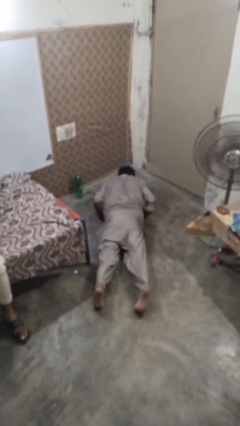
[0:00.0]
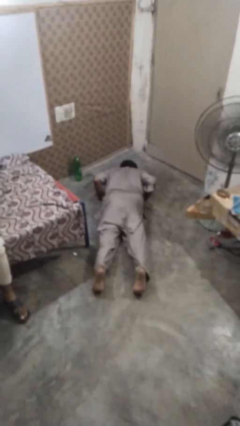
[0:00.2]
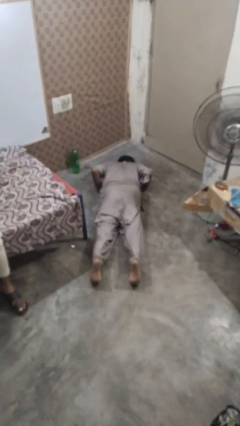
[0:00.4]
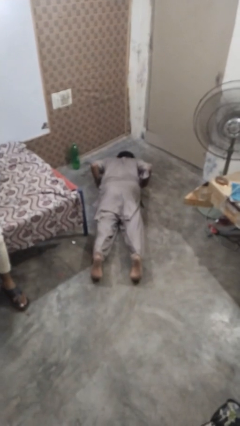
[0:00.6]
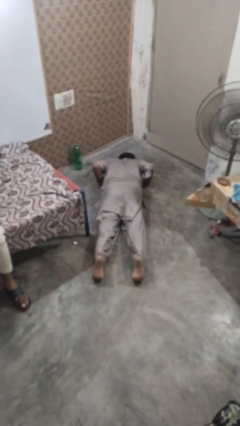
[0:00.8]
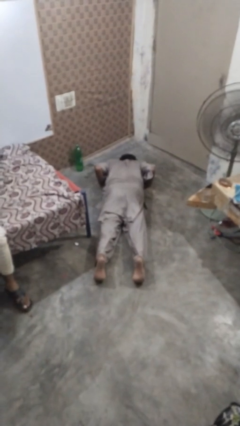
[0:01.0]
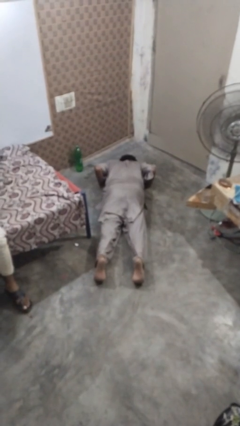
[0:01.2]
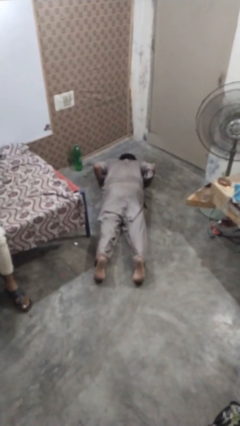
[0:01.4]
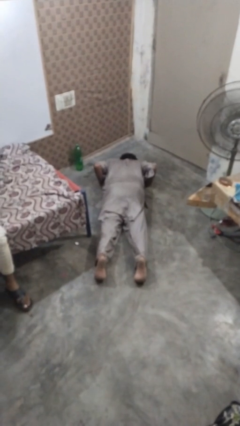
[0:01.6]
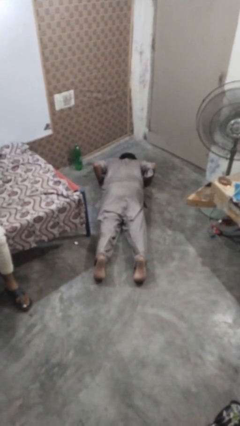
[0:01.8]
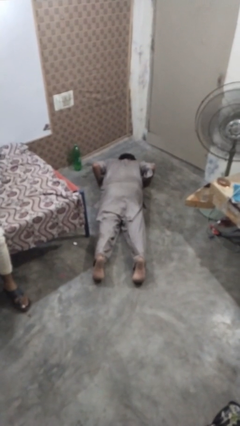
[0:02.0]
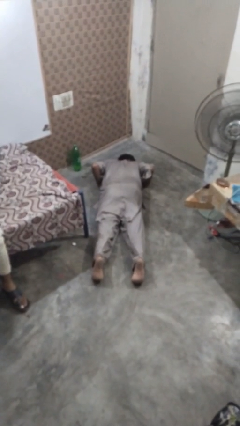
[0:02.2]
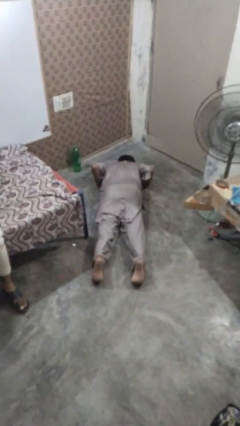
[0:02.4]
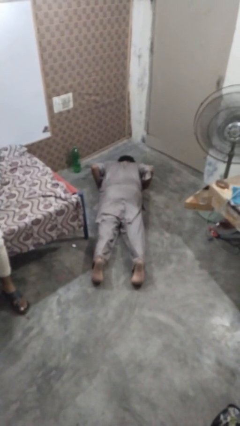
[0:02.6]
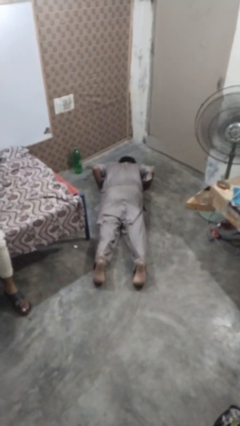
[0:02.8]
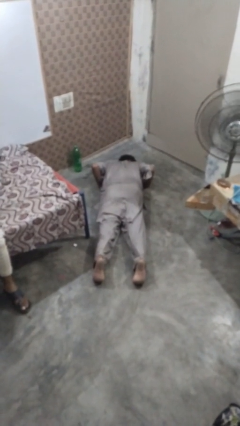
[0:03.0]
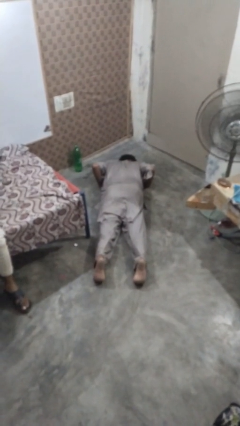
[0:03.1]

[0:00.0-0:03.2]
person lies down on floor

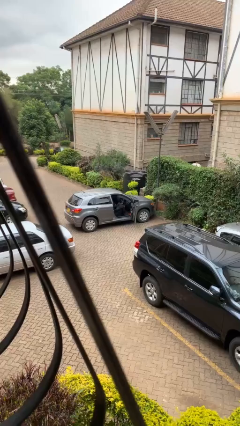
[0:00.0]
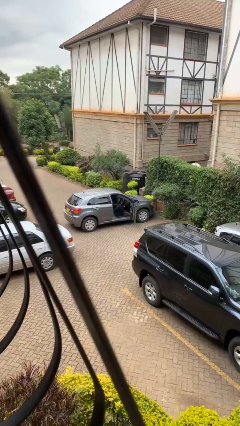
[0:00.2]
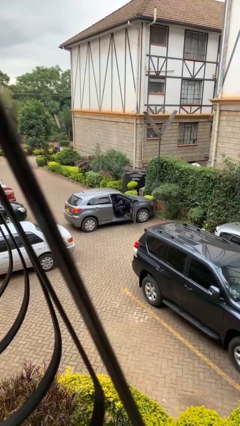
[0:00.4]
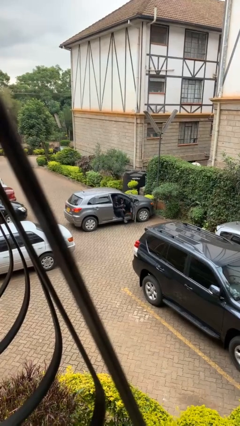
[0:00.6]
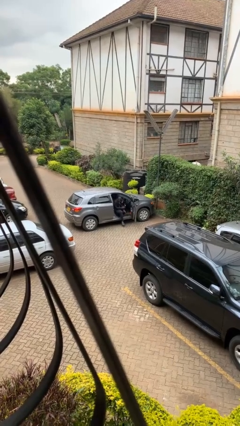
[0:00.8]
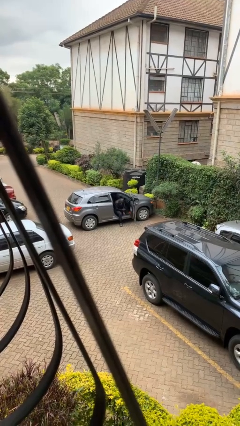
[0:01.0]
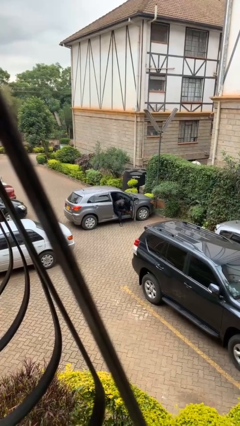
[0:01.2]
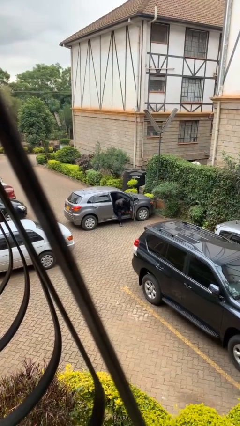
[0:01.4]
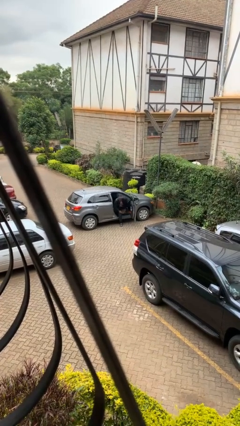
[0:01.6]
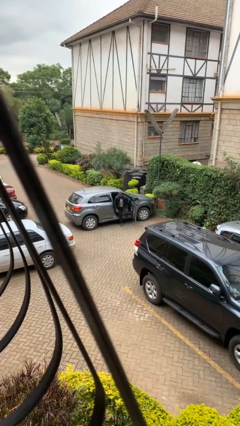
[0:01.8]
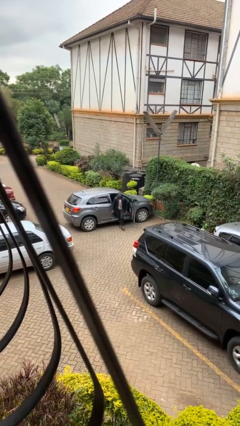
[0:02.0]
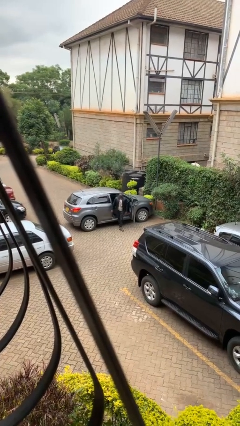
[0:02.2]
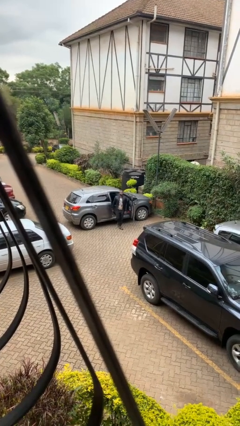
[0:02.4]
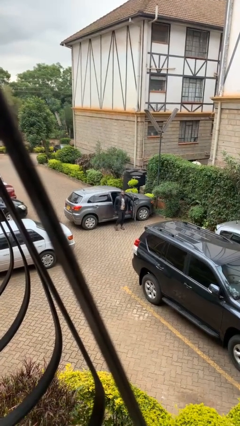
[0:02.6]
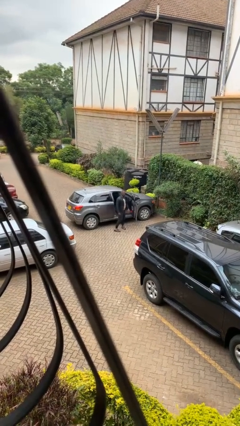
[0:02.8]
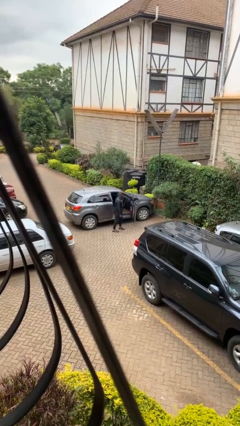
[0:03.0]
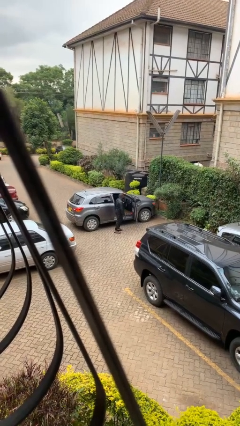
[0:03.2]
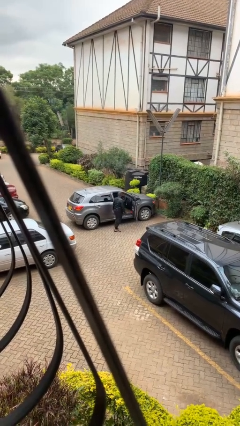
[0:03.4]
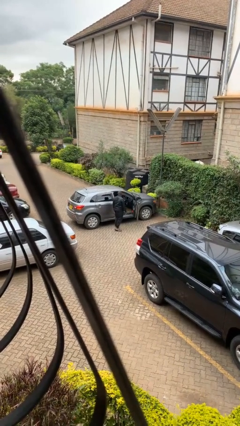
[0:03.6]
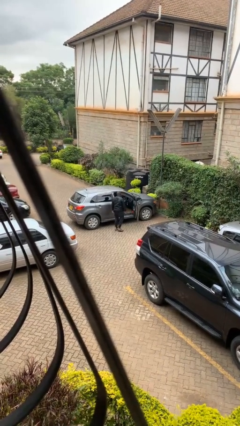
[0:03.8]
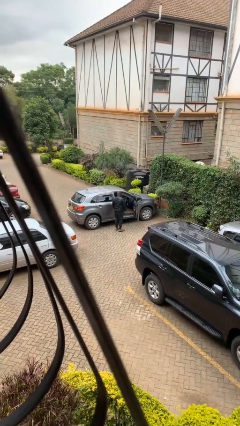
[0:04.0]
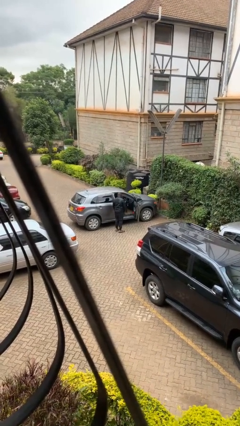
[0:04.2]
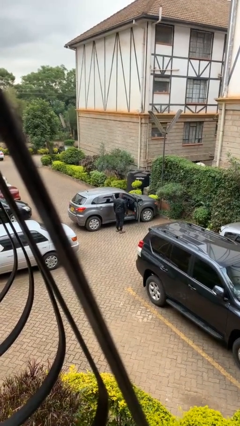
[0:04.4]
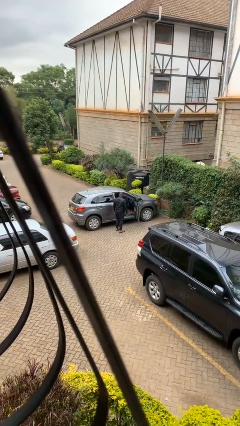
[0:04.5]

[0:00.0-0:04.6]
person exits car

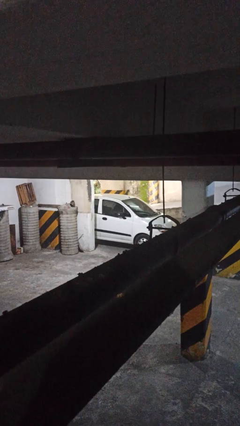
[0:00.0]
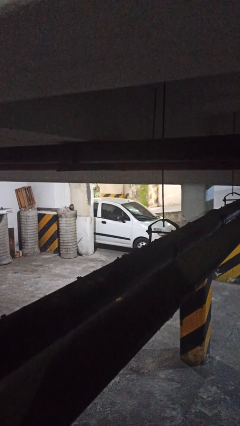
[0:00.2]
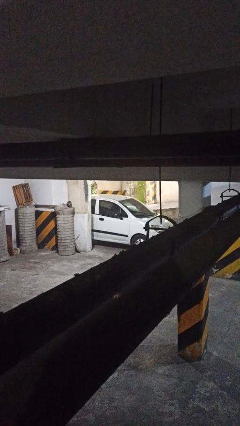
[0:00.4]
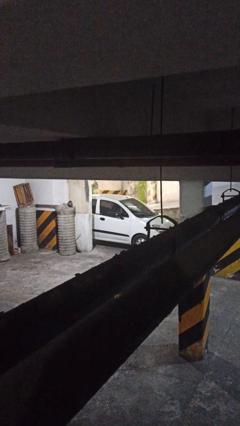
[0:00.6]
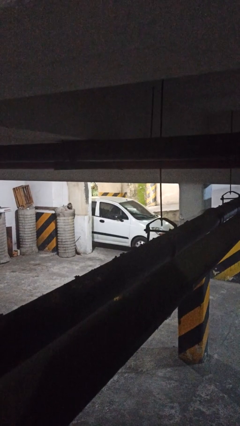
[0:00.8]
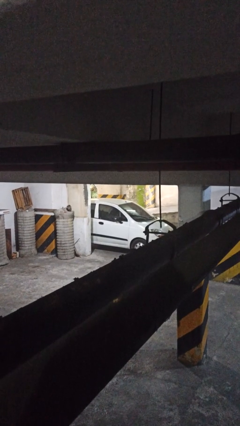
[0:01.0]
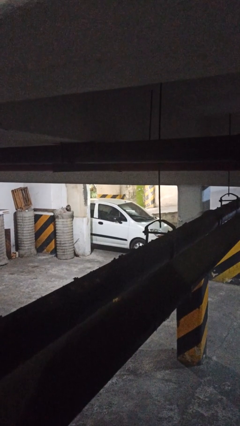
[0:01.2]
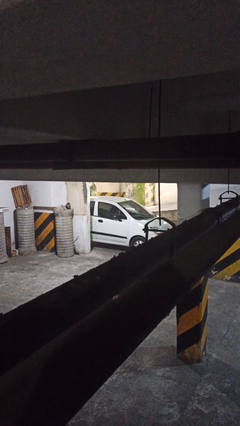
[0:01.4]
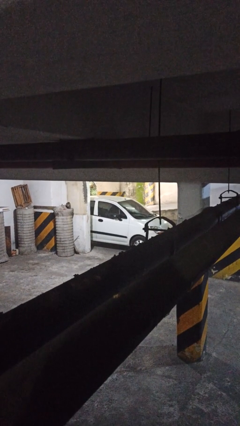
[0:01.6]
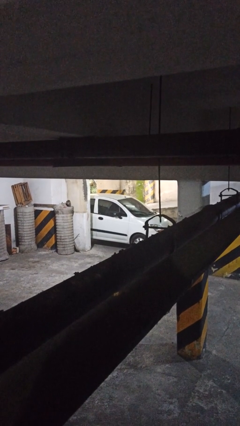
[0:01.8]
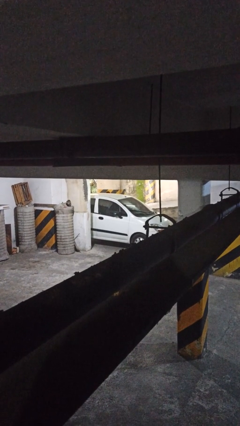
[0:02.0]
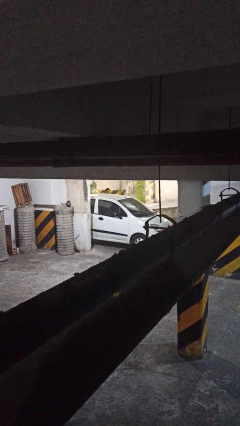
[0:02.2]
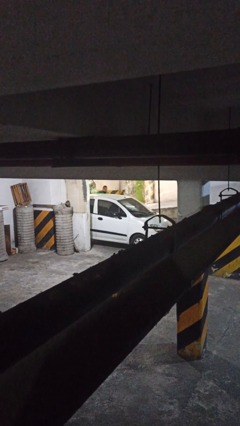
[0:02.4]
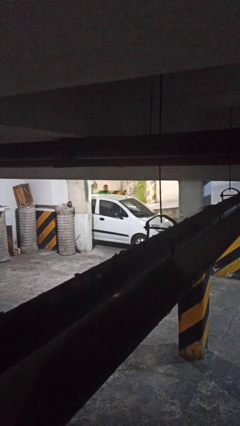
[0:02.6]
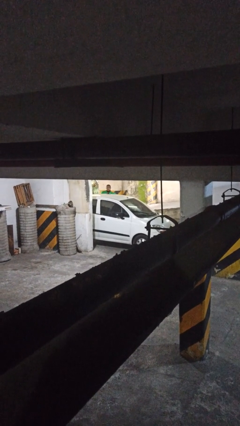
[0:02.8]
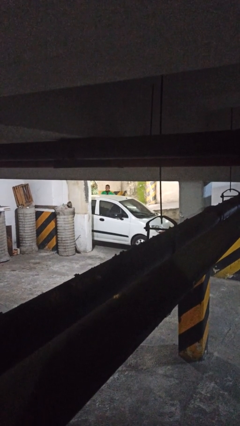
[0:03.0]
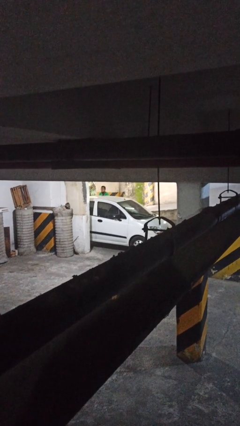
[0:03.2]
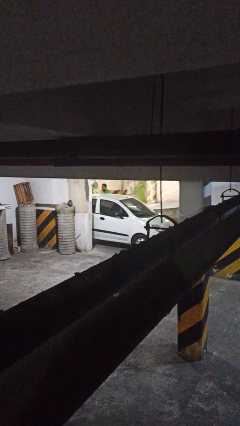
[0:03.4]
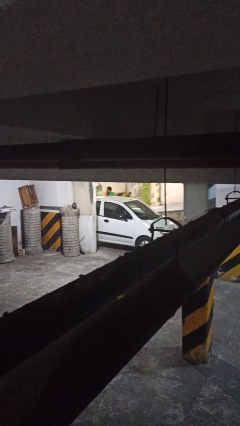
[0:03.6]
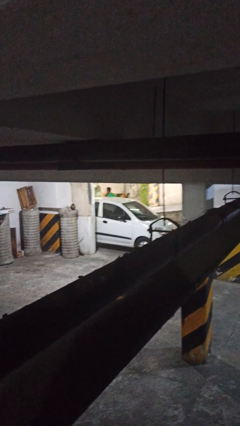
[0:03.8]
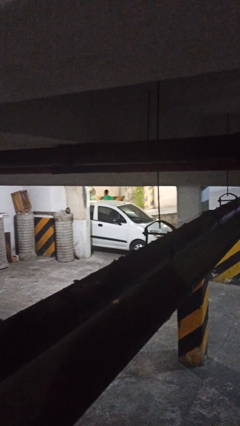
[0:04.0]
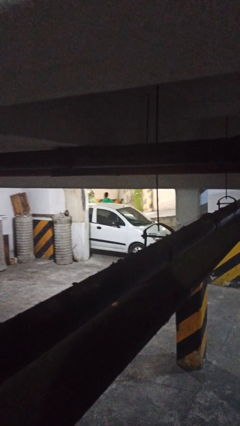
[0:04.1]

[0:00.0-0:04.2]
car drops off person

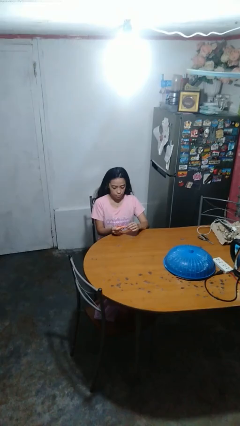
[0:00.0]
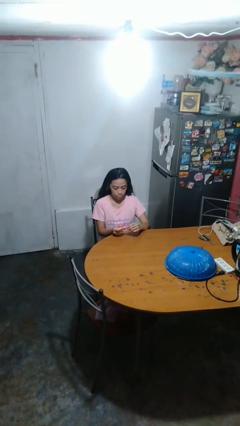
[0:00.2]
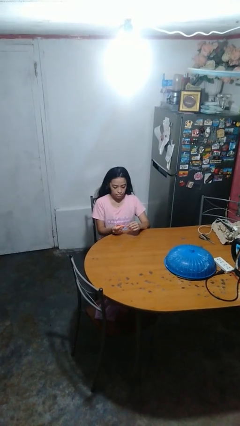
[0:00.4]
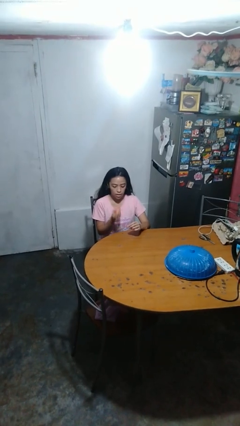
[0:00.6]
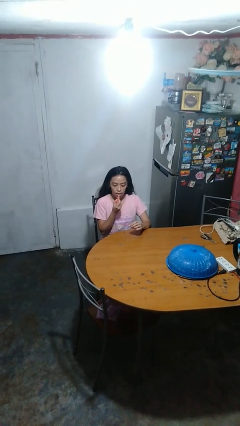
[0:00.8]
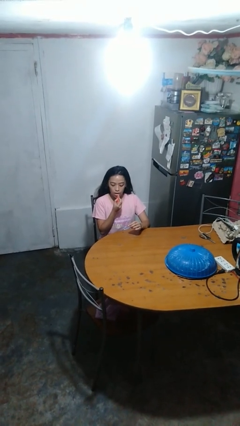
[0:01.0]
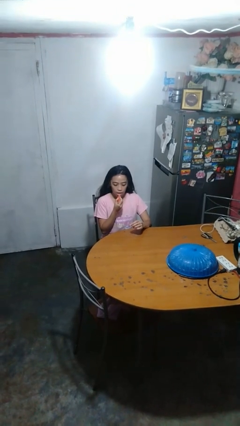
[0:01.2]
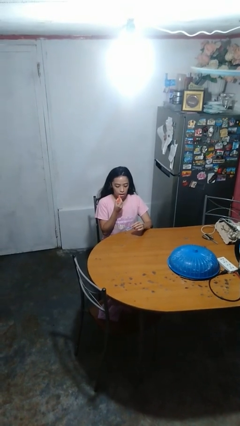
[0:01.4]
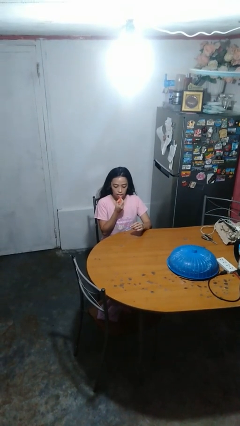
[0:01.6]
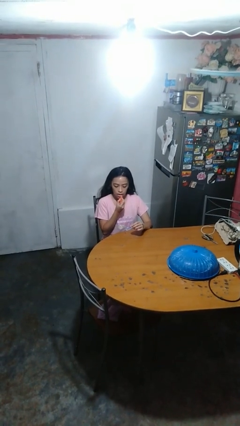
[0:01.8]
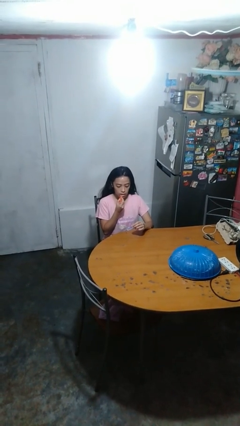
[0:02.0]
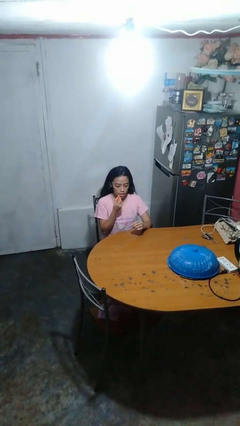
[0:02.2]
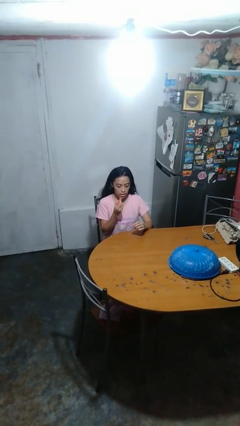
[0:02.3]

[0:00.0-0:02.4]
person applies lip makeup

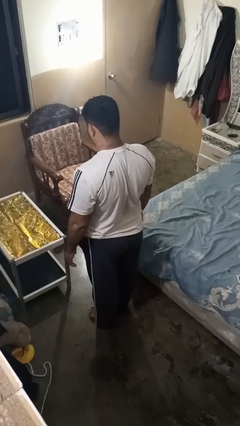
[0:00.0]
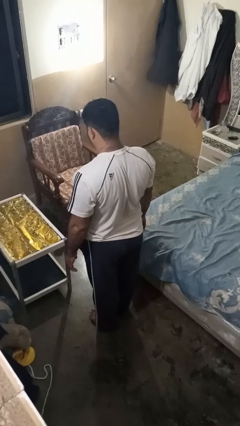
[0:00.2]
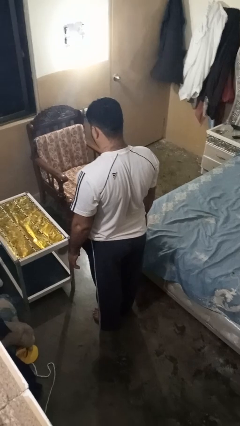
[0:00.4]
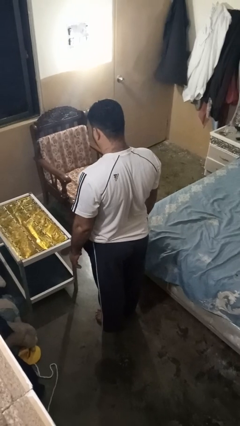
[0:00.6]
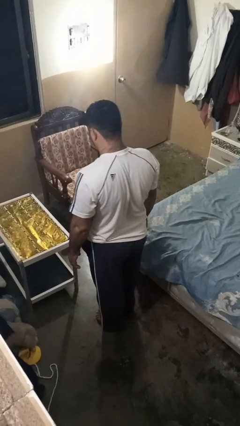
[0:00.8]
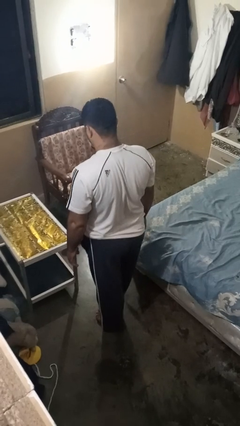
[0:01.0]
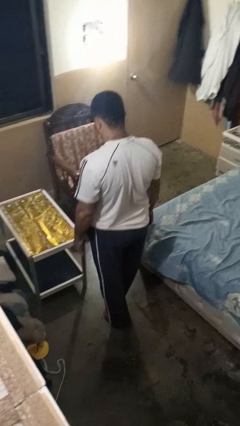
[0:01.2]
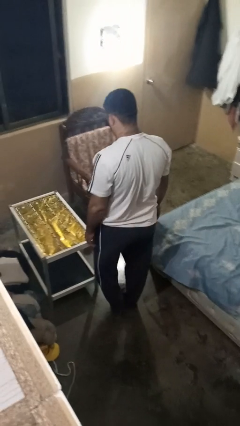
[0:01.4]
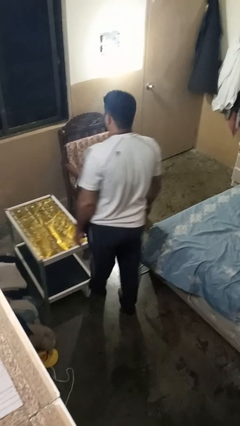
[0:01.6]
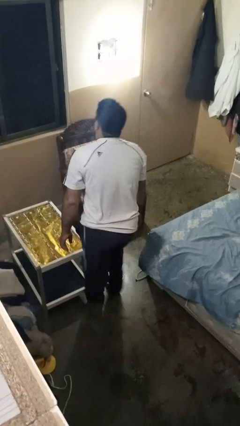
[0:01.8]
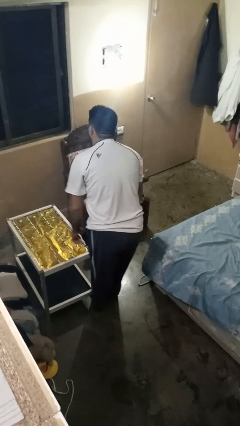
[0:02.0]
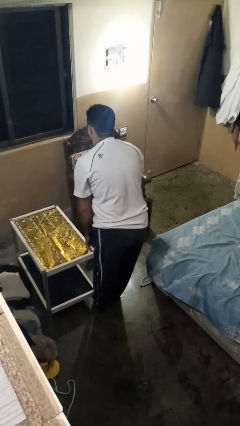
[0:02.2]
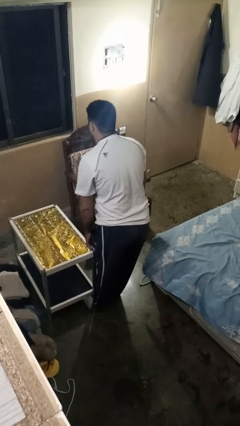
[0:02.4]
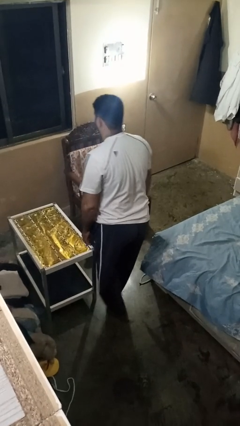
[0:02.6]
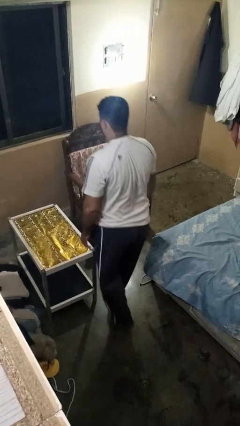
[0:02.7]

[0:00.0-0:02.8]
person bumps into table

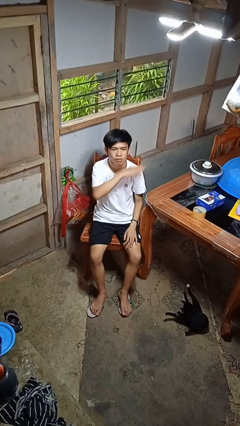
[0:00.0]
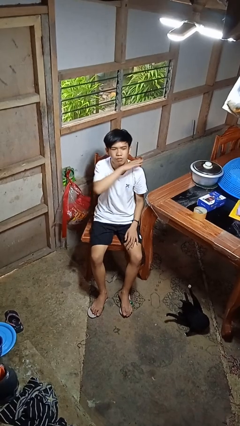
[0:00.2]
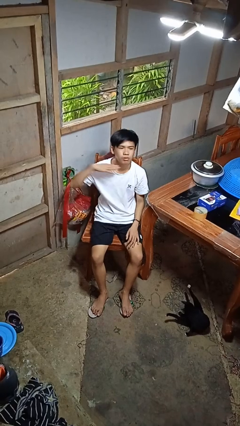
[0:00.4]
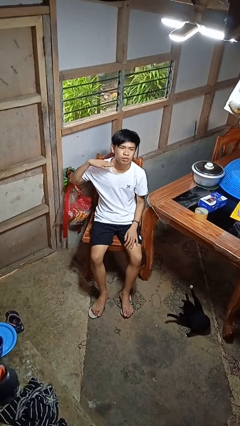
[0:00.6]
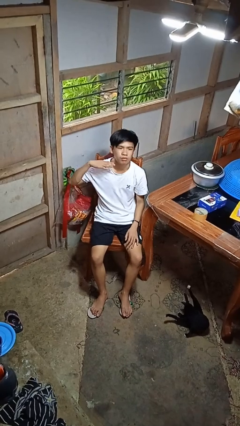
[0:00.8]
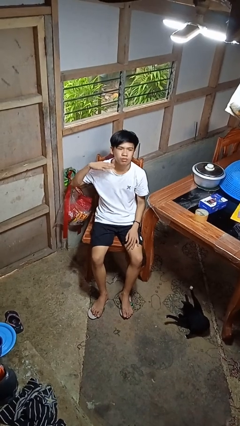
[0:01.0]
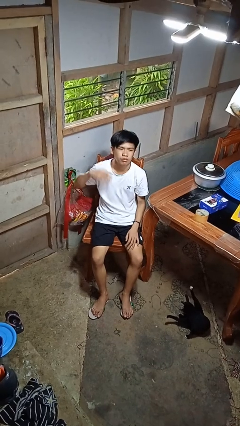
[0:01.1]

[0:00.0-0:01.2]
person gestures cut
